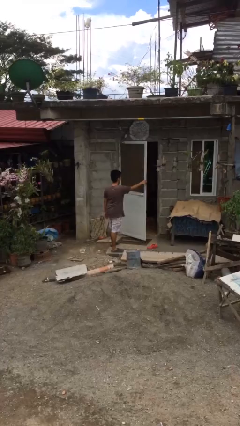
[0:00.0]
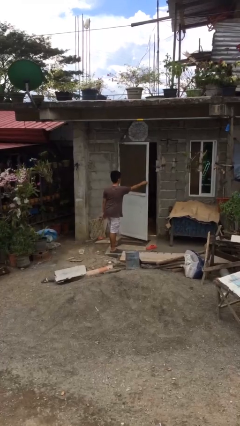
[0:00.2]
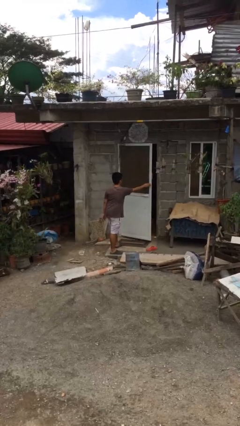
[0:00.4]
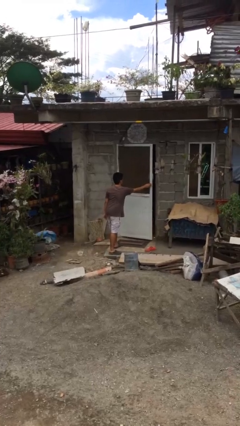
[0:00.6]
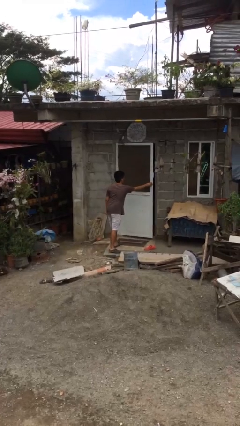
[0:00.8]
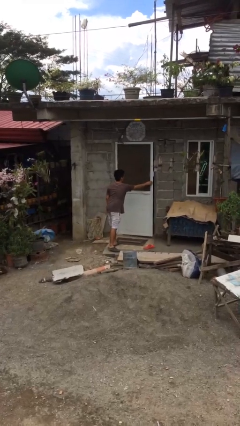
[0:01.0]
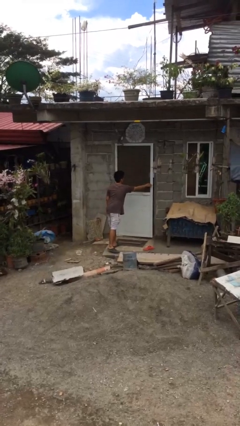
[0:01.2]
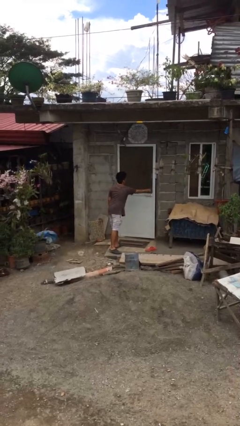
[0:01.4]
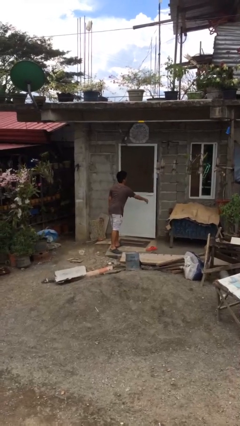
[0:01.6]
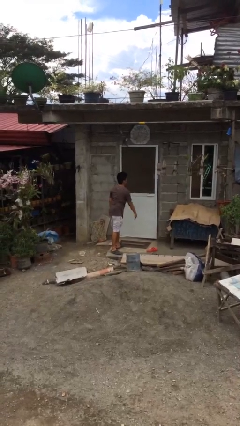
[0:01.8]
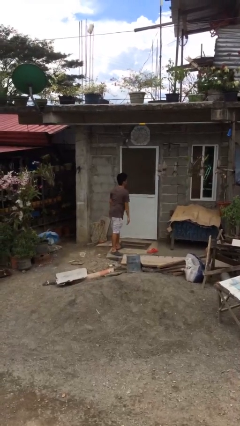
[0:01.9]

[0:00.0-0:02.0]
person closes facility door

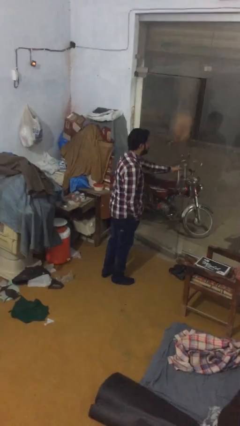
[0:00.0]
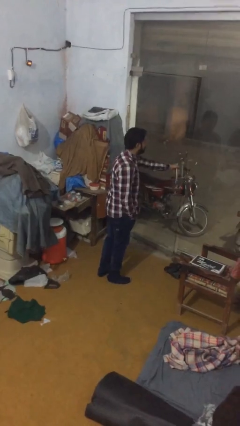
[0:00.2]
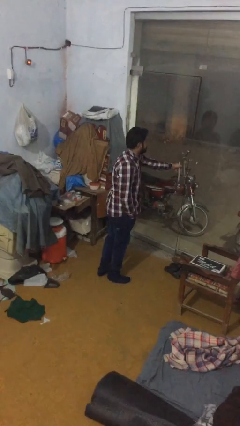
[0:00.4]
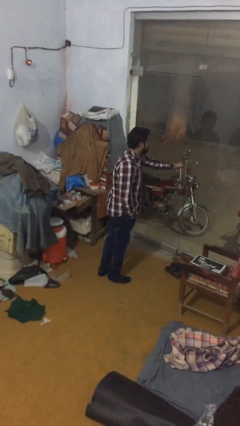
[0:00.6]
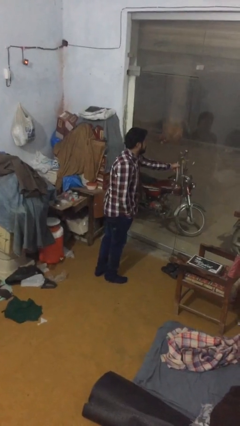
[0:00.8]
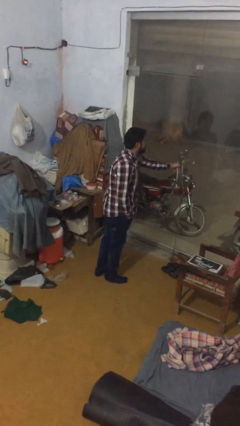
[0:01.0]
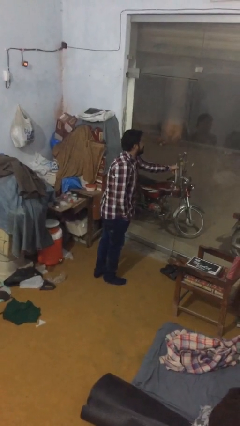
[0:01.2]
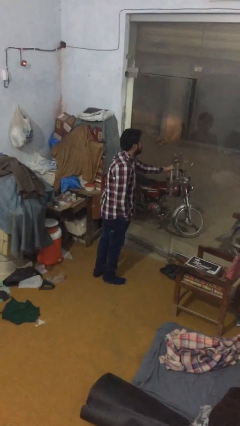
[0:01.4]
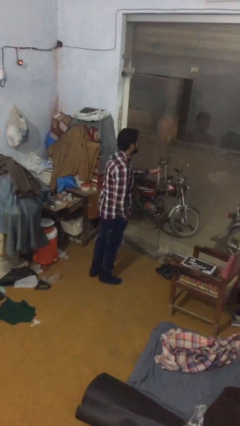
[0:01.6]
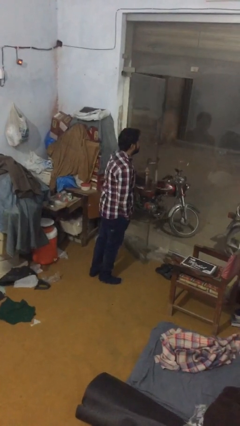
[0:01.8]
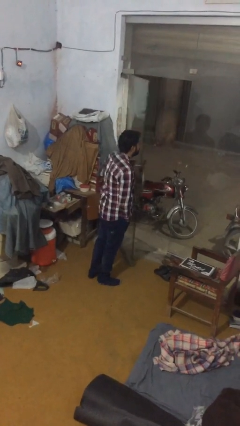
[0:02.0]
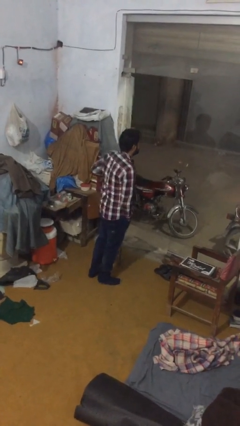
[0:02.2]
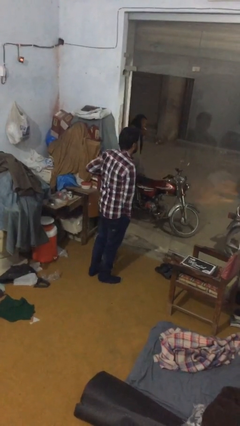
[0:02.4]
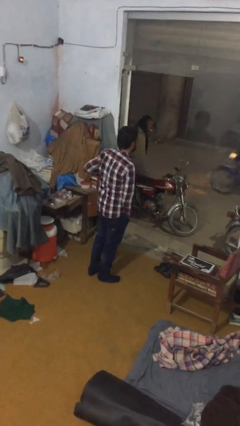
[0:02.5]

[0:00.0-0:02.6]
person opens facility door

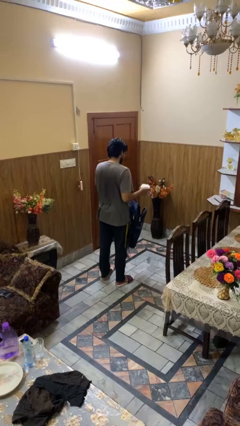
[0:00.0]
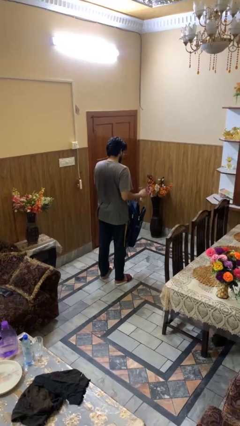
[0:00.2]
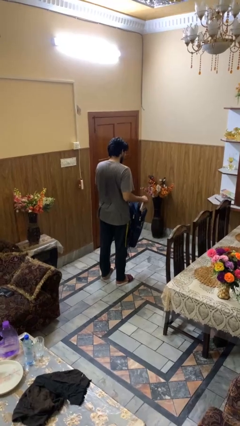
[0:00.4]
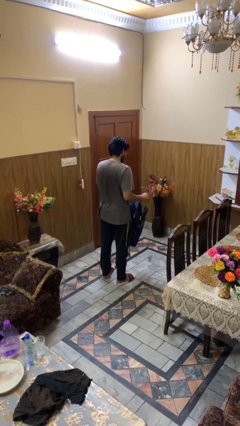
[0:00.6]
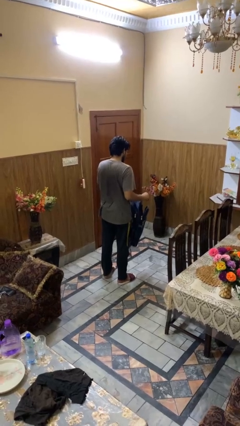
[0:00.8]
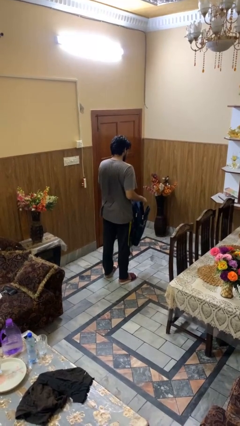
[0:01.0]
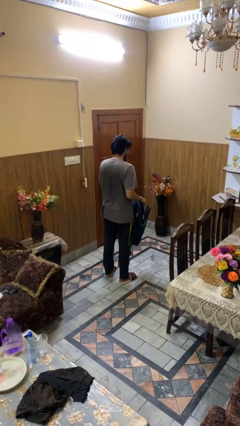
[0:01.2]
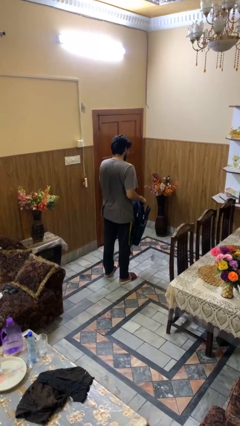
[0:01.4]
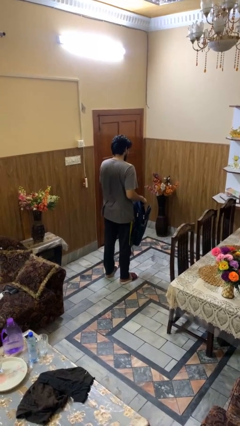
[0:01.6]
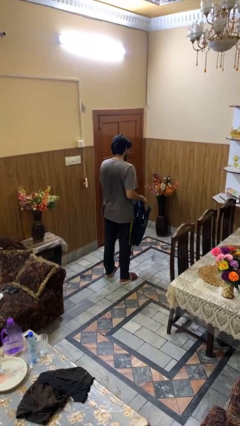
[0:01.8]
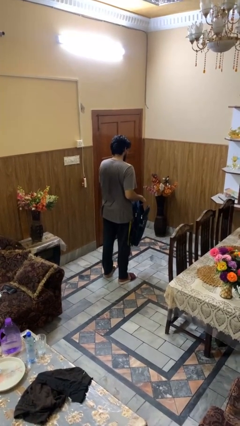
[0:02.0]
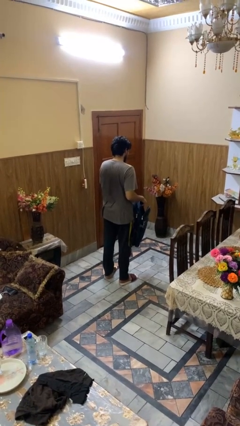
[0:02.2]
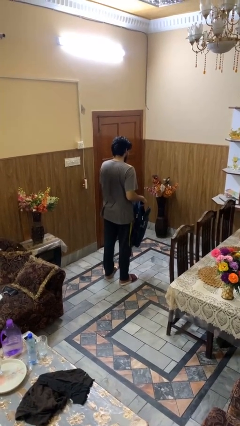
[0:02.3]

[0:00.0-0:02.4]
person puts object into backpack

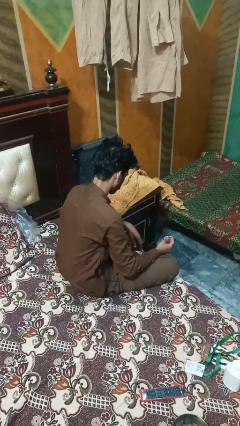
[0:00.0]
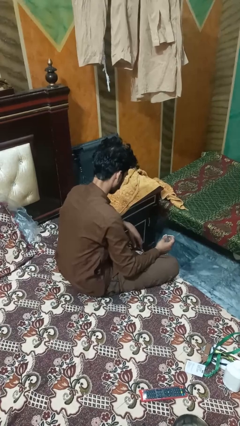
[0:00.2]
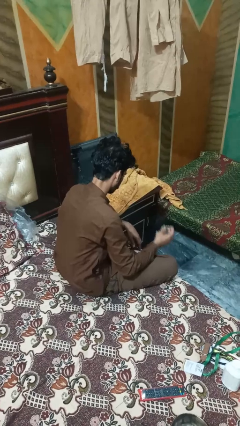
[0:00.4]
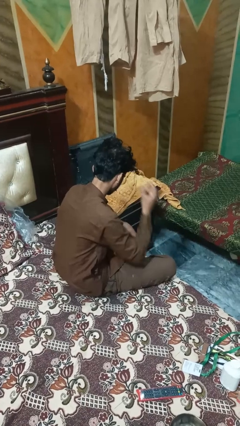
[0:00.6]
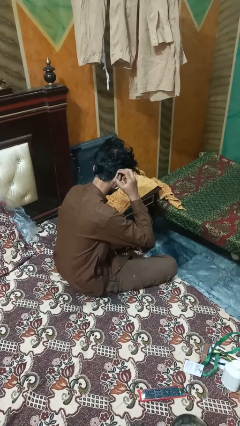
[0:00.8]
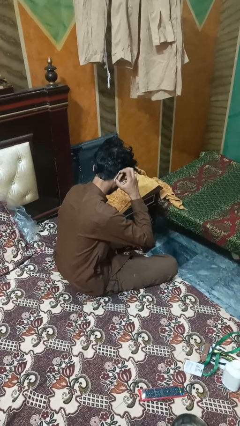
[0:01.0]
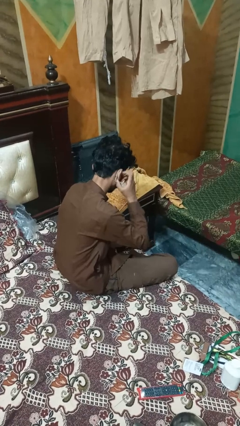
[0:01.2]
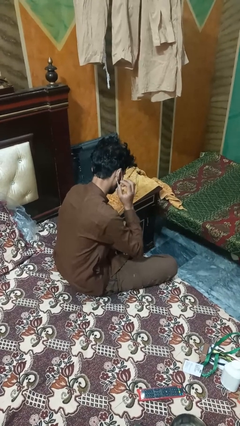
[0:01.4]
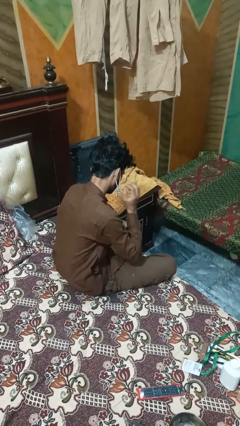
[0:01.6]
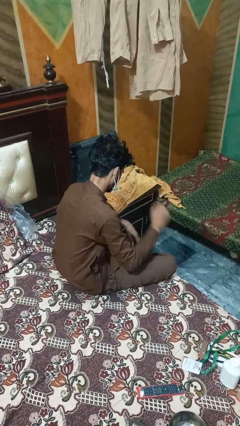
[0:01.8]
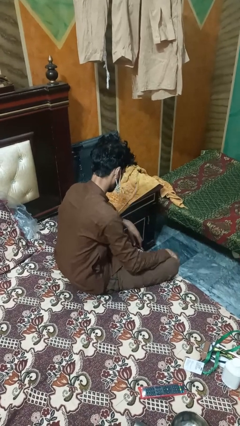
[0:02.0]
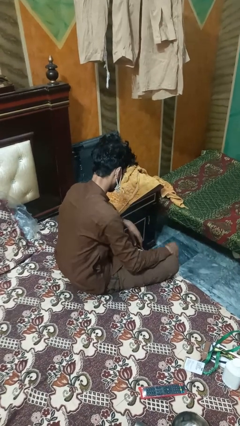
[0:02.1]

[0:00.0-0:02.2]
person puts on earrings

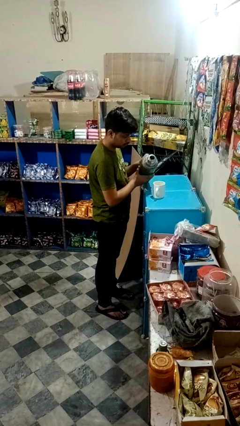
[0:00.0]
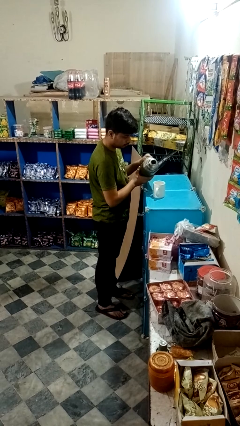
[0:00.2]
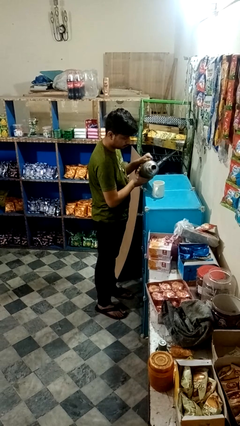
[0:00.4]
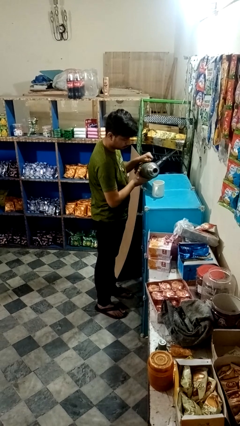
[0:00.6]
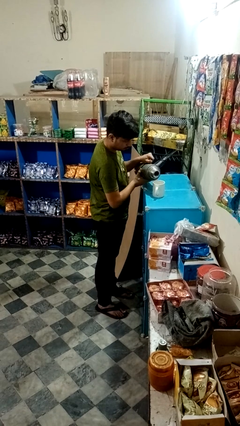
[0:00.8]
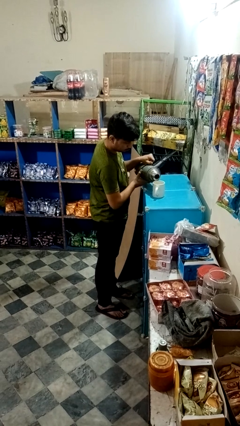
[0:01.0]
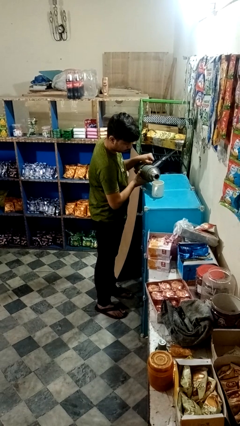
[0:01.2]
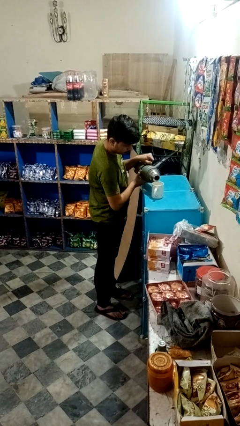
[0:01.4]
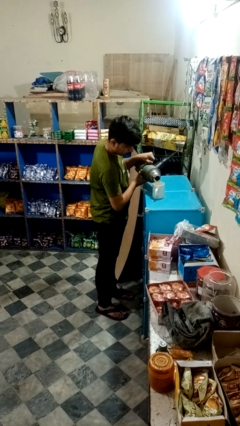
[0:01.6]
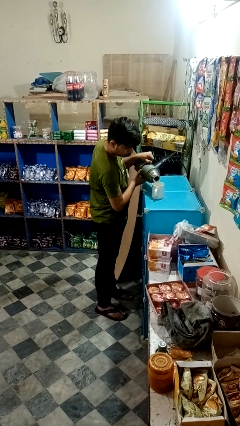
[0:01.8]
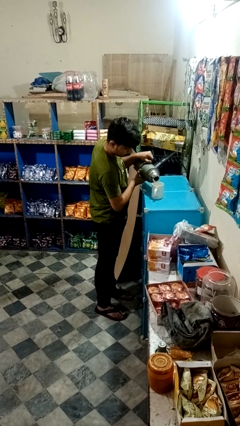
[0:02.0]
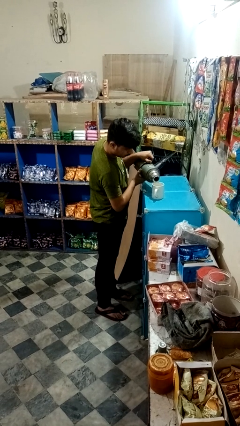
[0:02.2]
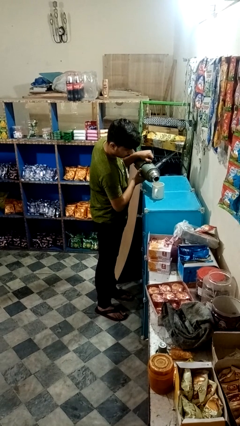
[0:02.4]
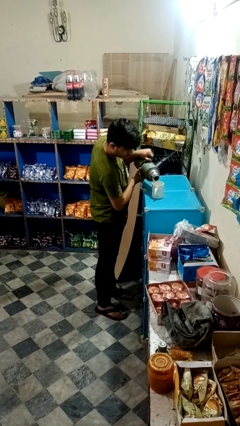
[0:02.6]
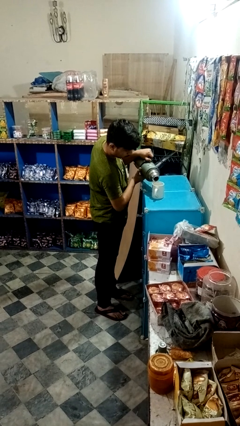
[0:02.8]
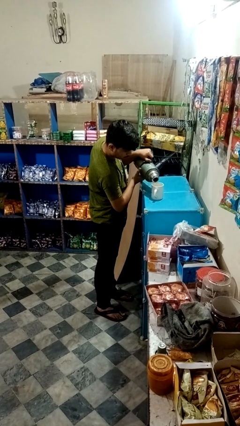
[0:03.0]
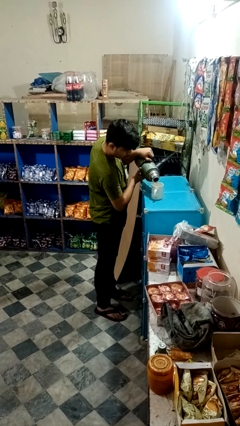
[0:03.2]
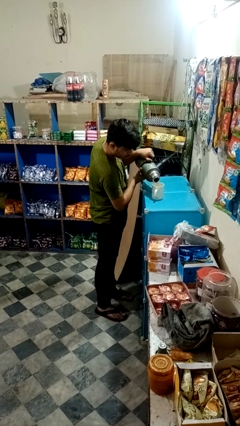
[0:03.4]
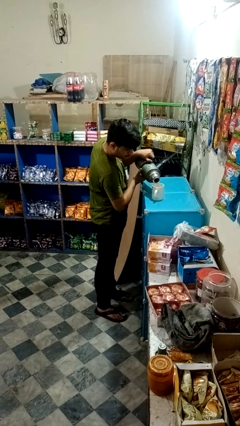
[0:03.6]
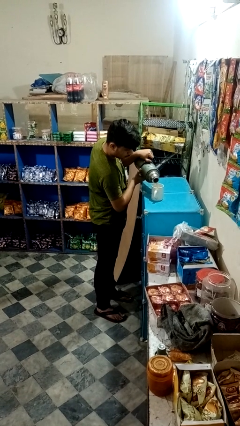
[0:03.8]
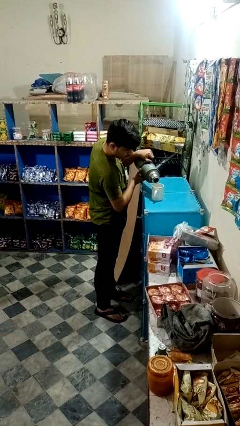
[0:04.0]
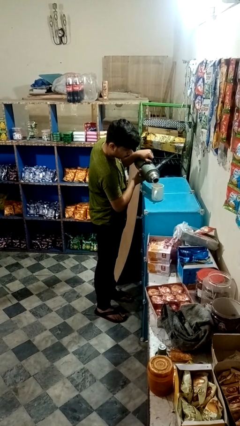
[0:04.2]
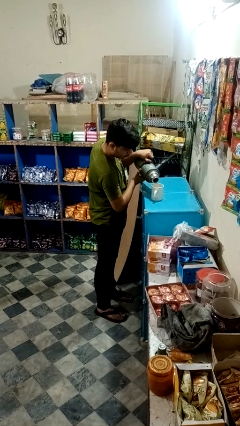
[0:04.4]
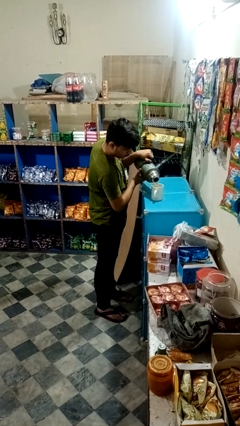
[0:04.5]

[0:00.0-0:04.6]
person pours coffee into mug

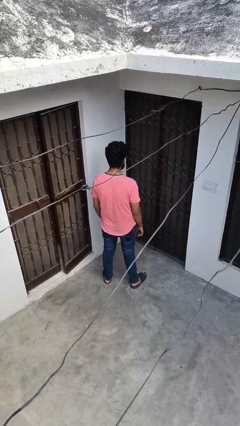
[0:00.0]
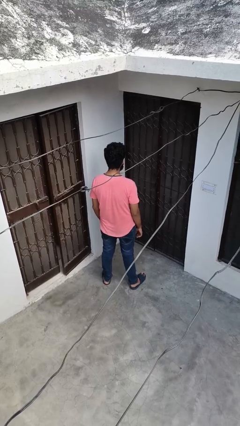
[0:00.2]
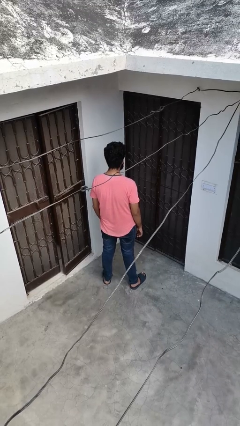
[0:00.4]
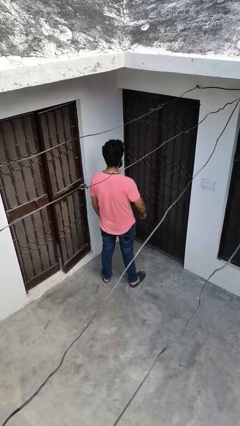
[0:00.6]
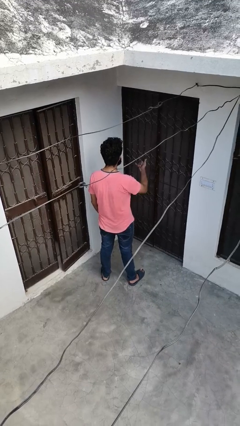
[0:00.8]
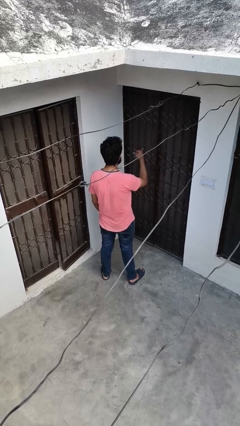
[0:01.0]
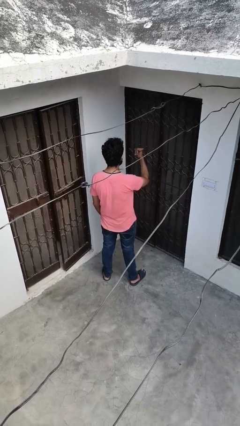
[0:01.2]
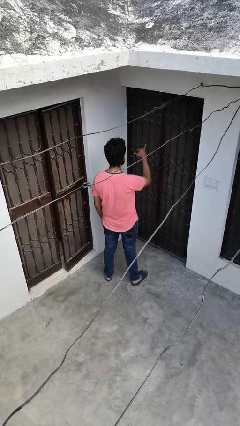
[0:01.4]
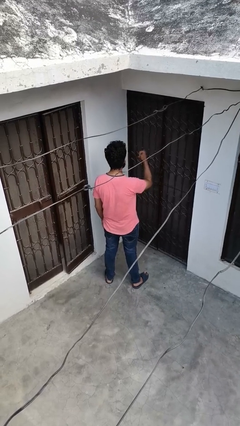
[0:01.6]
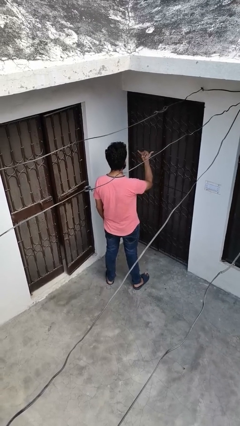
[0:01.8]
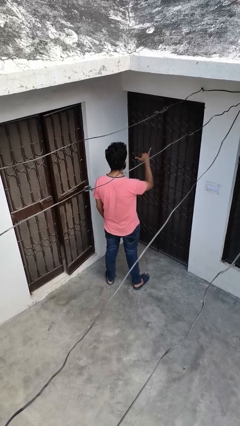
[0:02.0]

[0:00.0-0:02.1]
person gestures hang loose

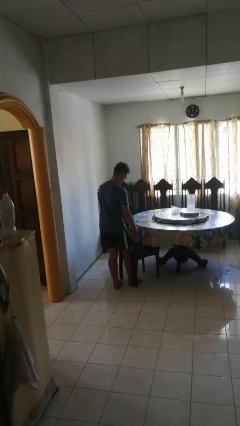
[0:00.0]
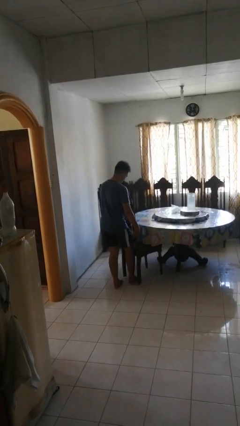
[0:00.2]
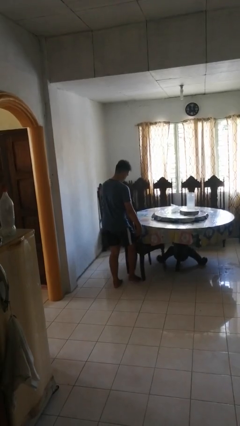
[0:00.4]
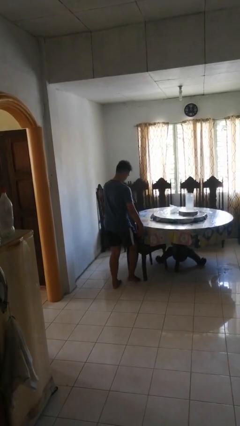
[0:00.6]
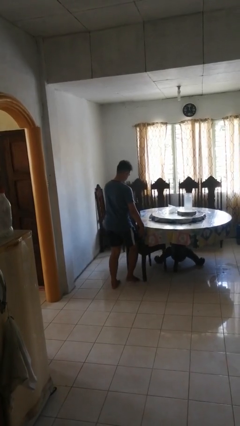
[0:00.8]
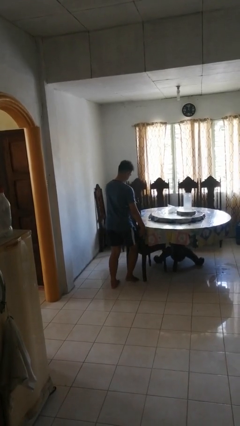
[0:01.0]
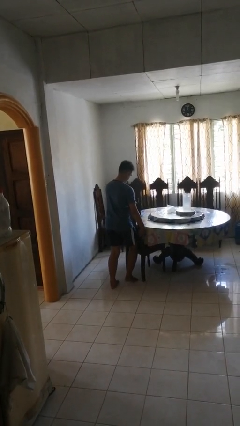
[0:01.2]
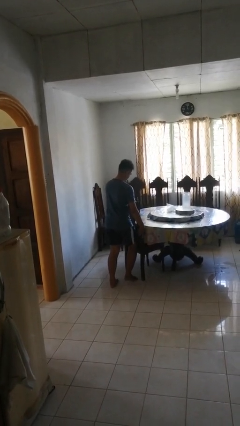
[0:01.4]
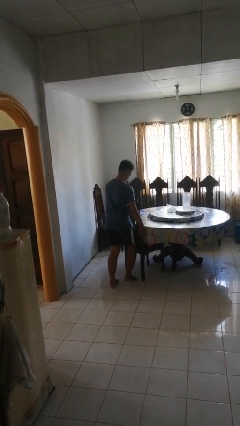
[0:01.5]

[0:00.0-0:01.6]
person pushes in chair
